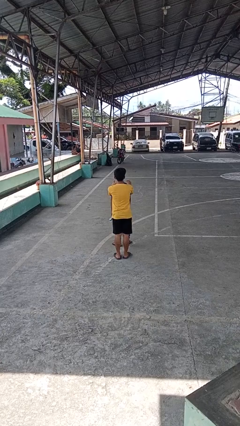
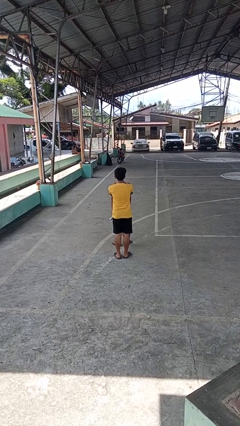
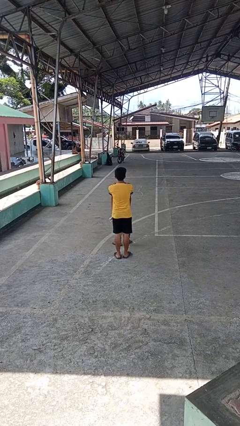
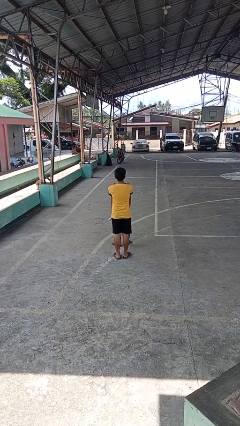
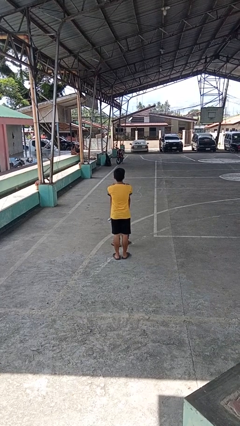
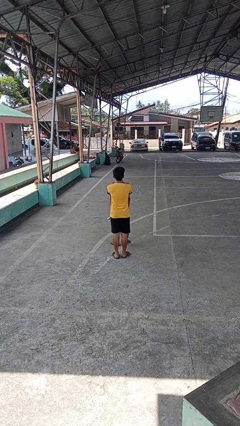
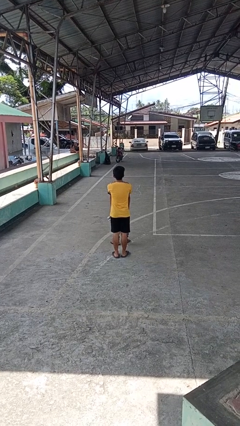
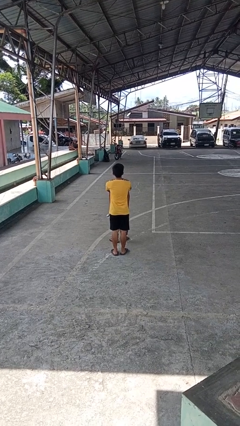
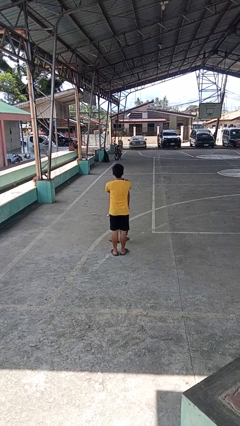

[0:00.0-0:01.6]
person grabs person by shoulder

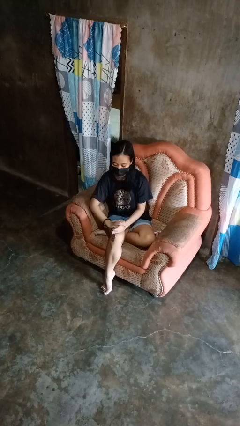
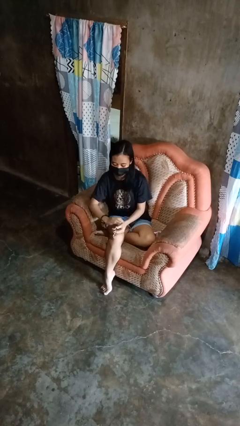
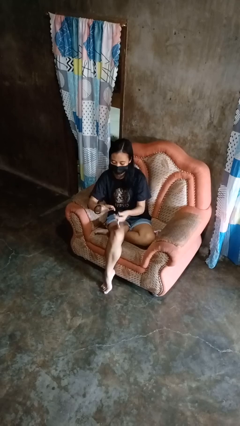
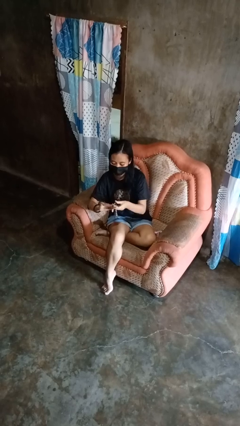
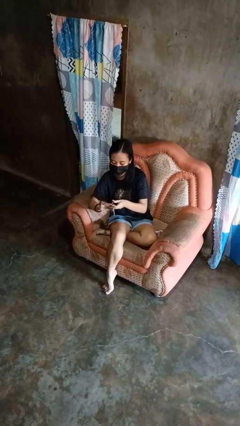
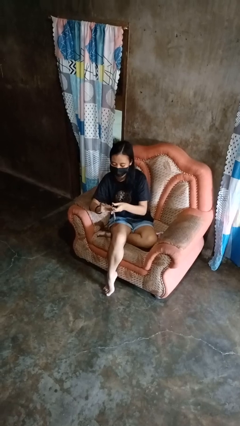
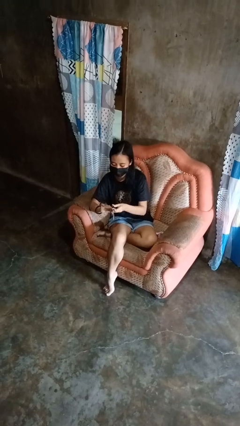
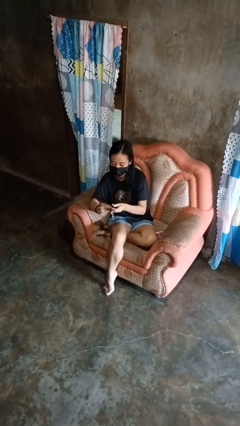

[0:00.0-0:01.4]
person clips fingernails

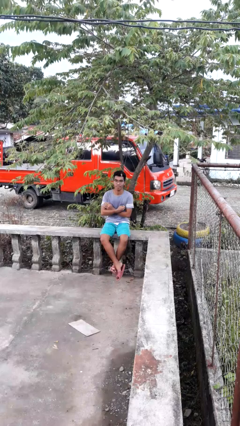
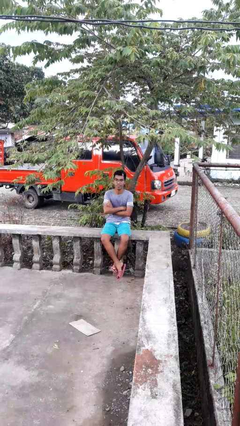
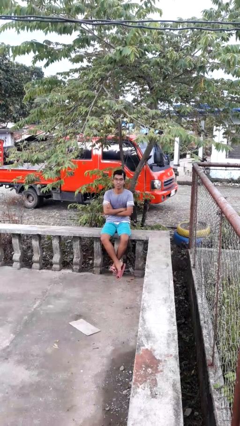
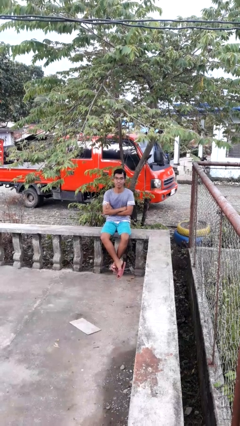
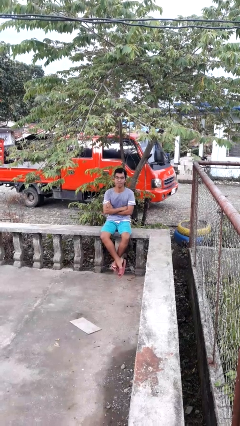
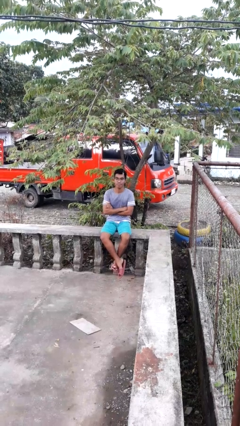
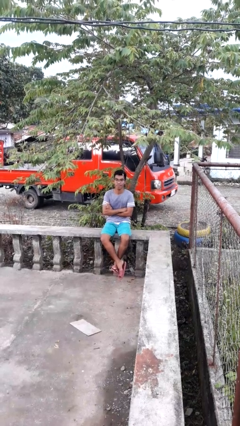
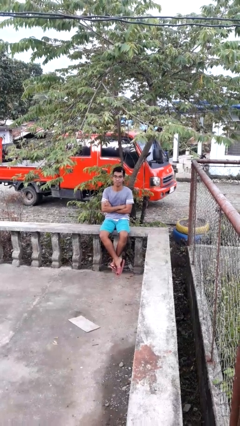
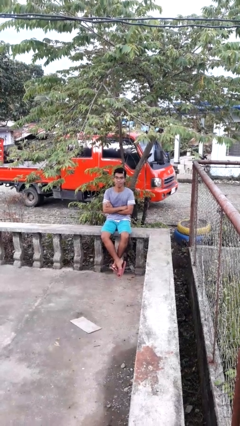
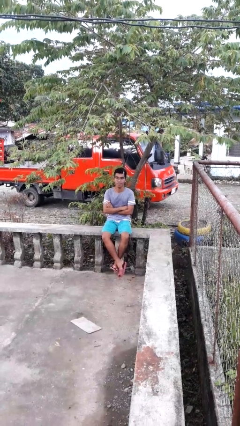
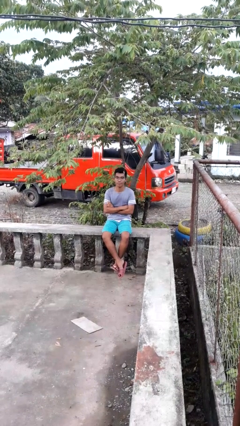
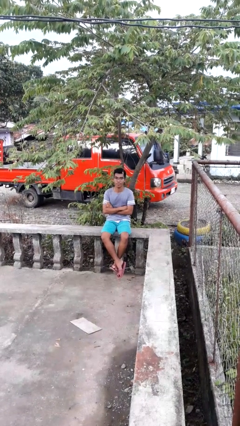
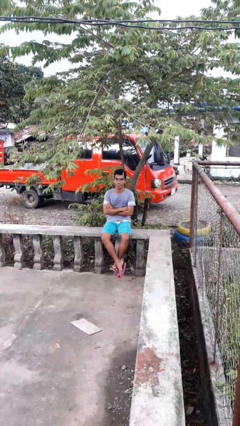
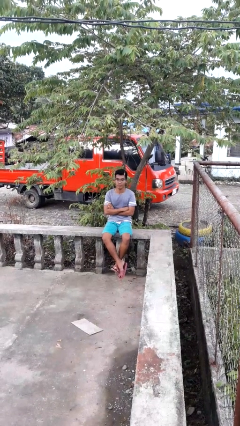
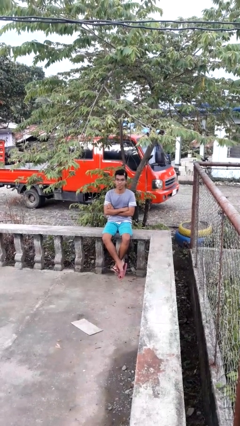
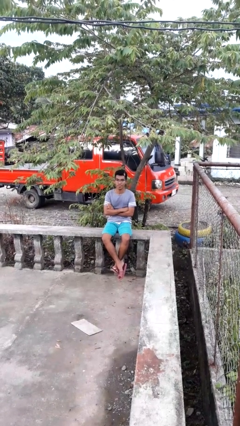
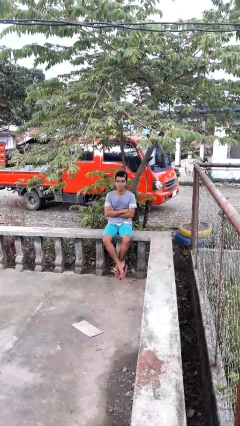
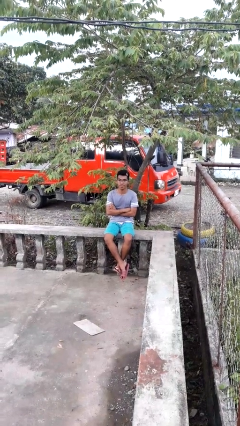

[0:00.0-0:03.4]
person crosses arms

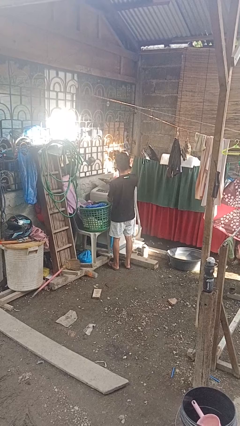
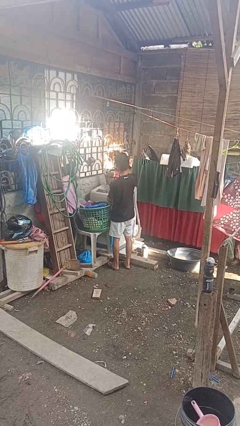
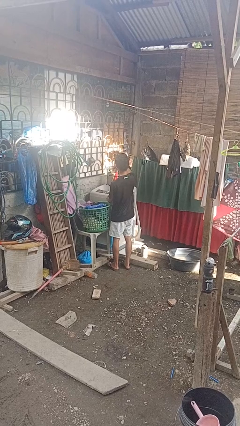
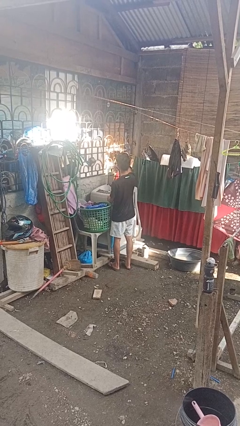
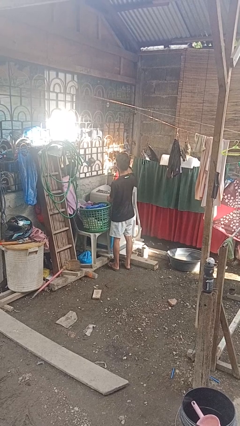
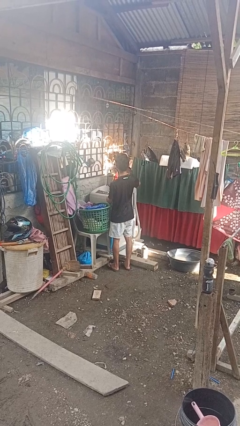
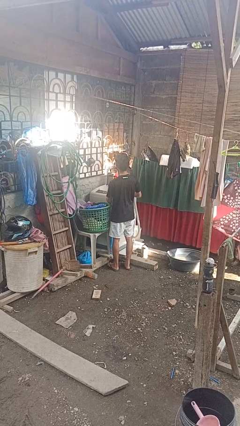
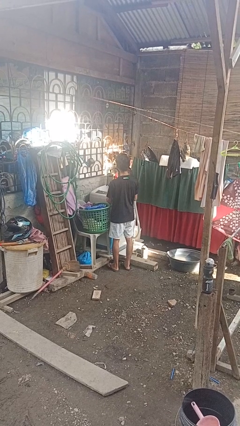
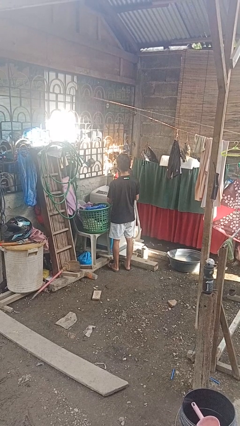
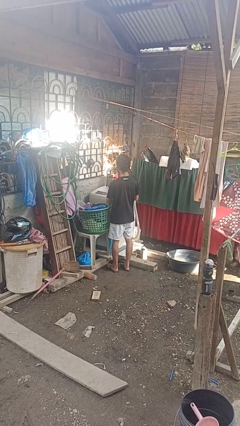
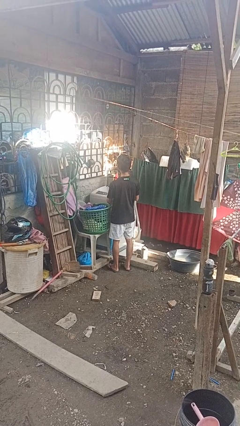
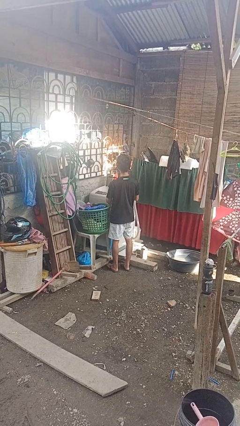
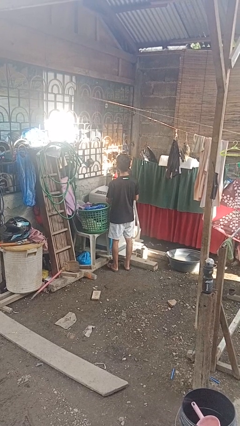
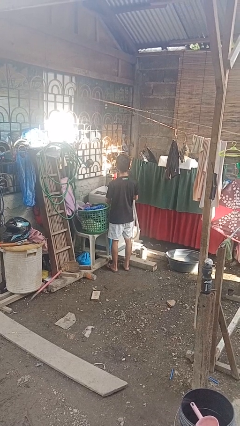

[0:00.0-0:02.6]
person opens clothes washer

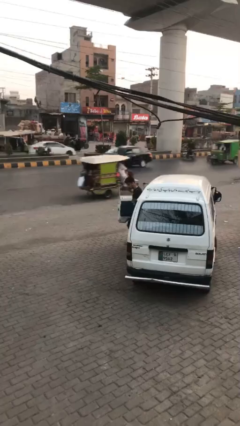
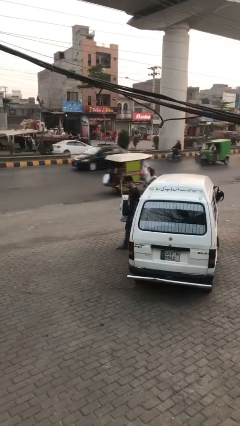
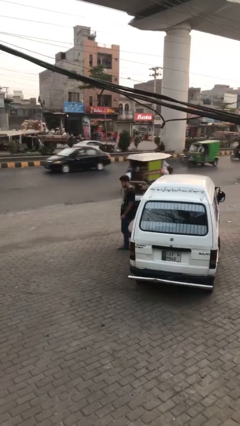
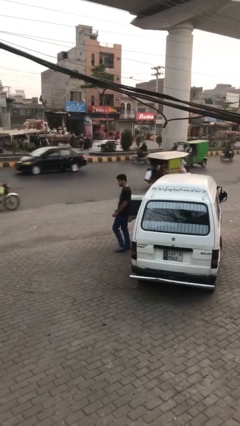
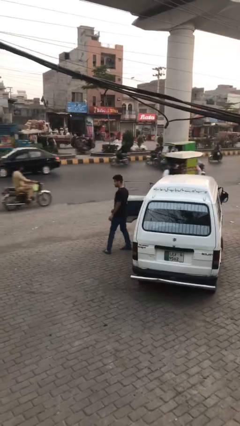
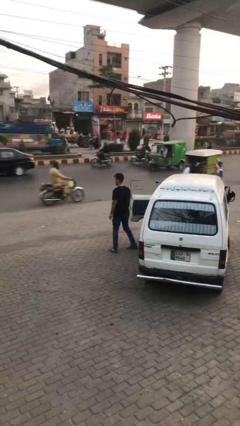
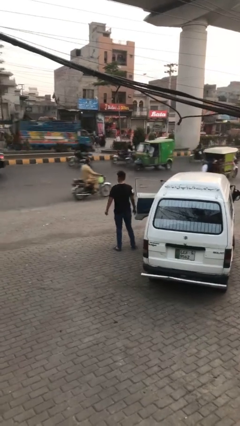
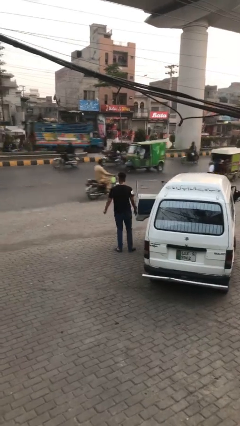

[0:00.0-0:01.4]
person exits car

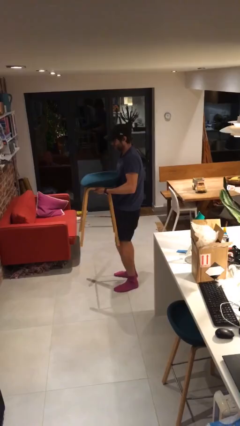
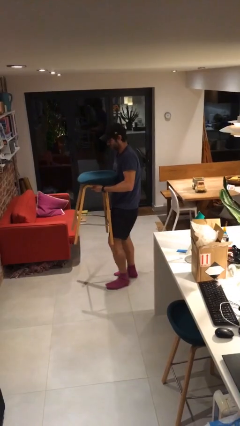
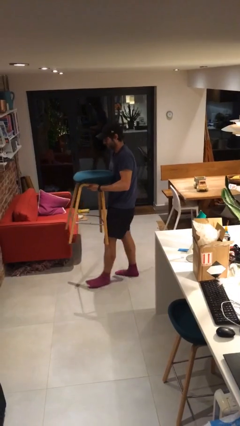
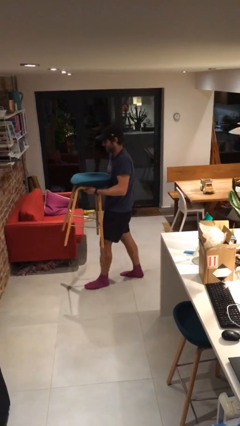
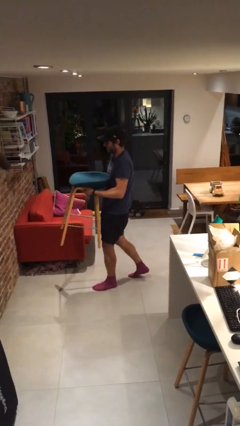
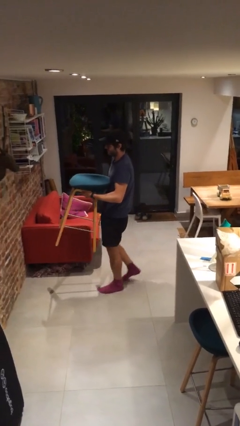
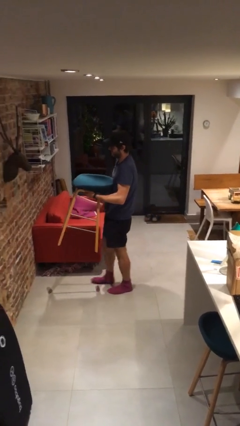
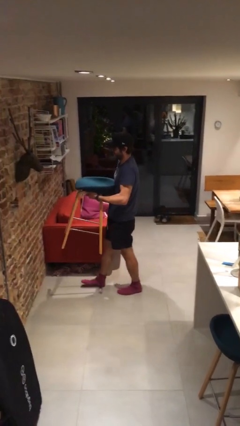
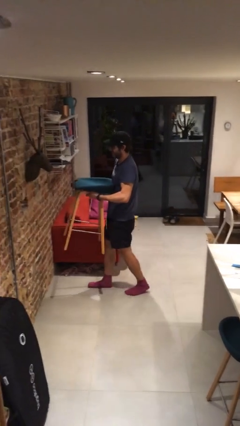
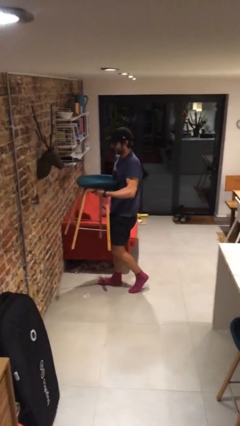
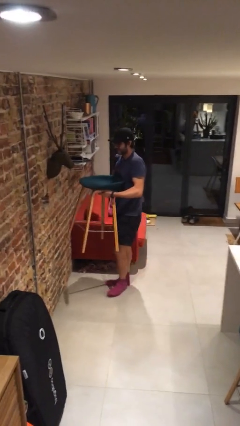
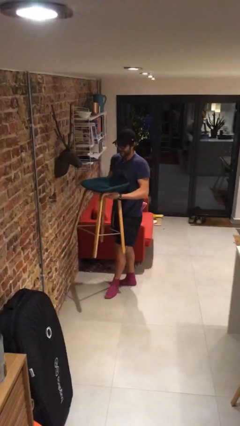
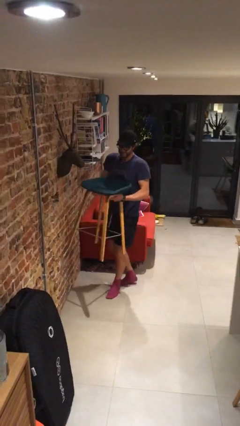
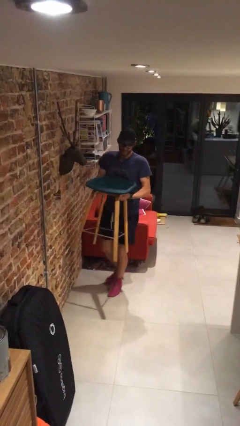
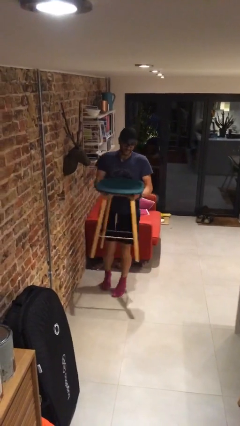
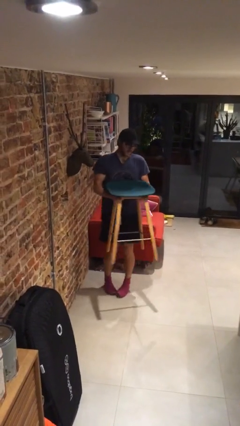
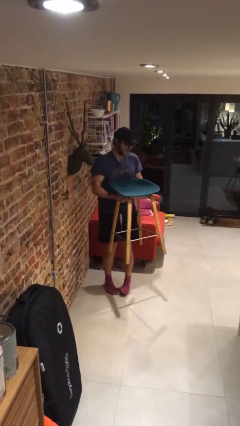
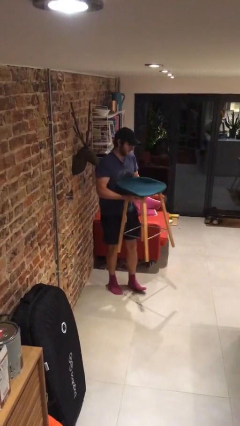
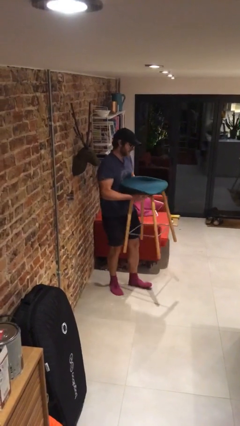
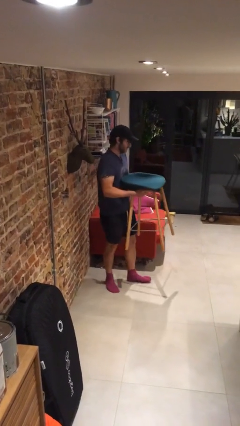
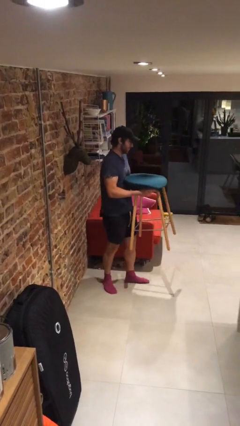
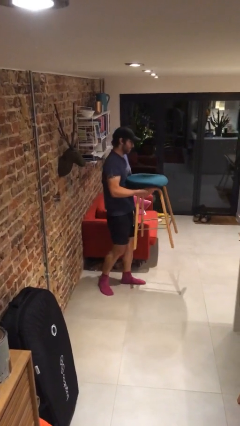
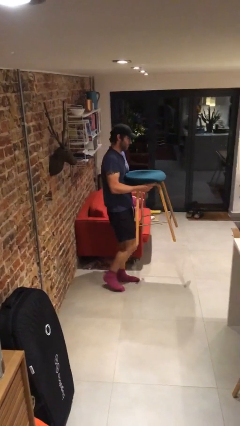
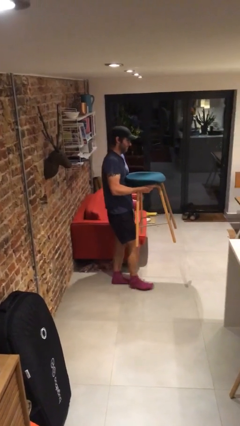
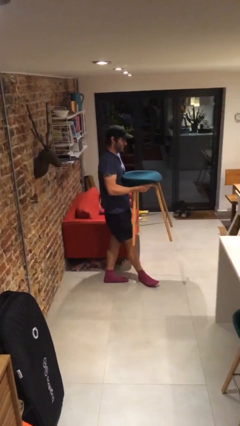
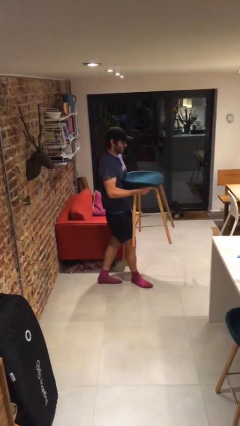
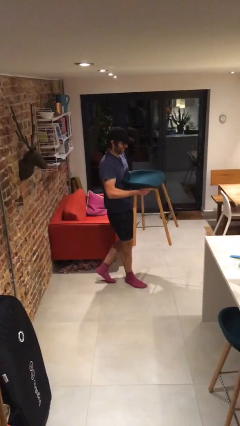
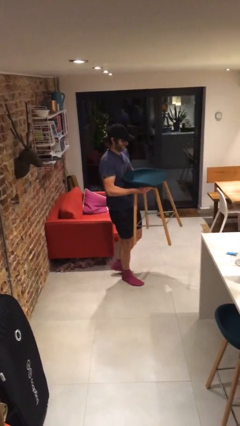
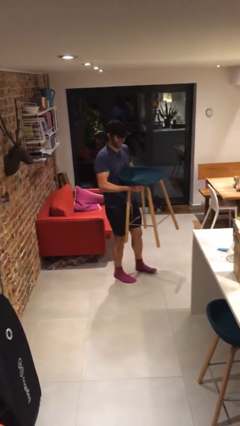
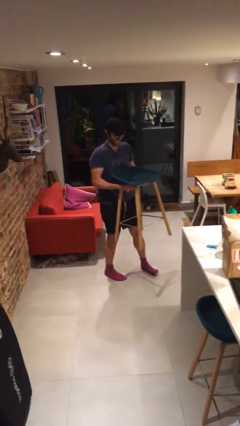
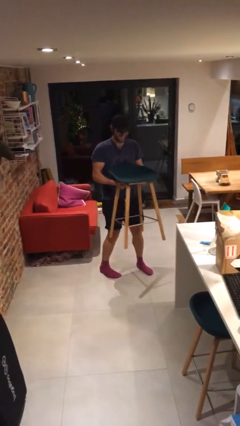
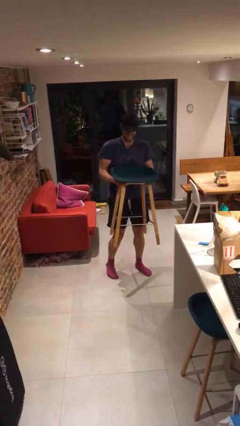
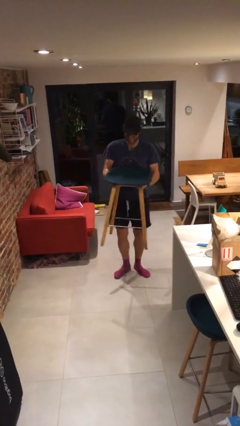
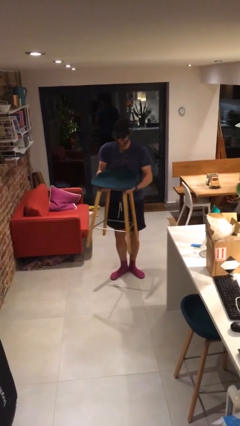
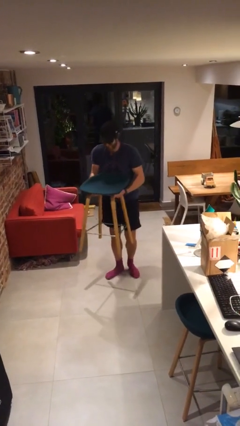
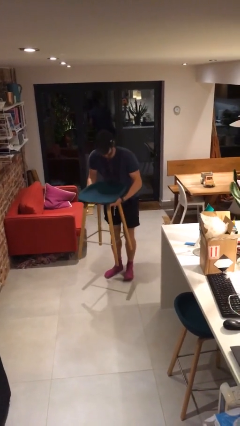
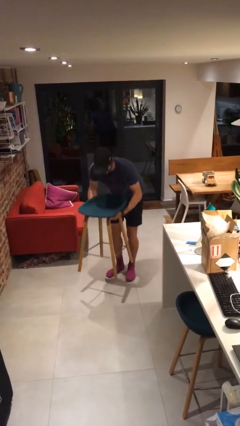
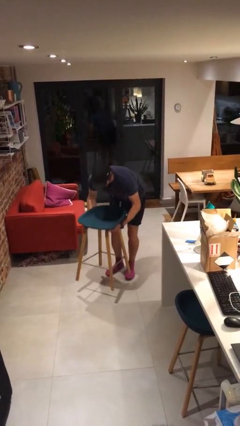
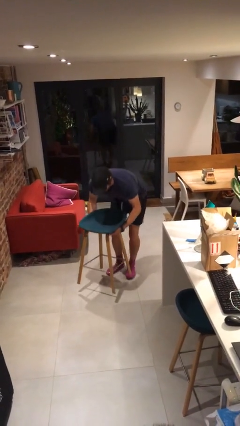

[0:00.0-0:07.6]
person carries heavy object
